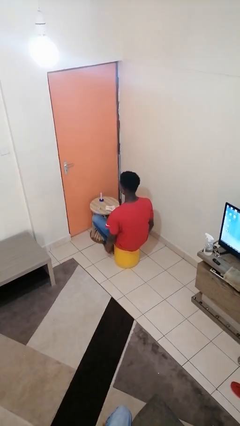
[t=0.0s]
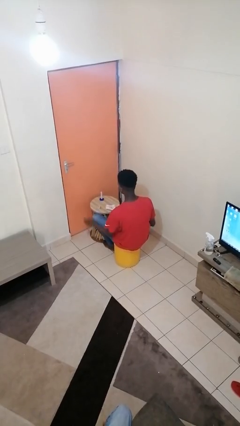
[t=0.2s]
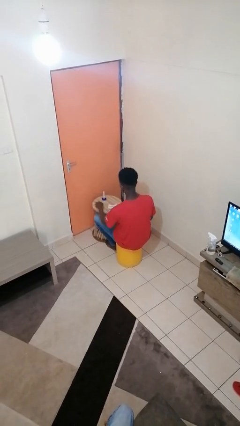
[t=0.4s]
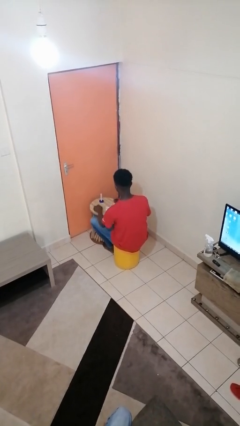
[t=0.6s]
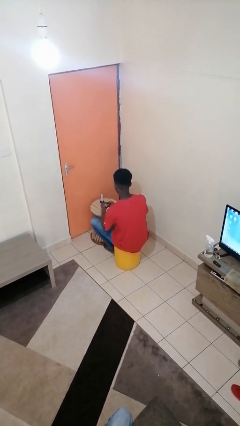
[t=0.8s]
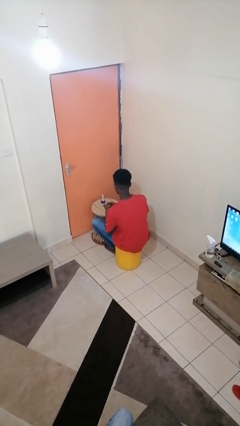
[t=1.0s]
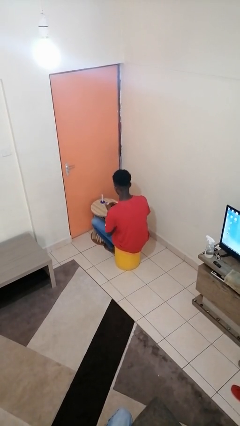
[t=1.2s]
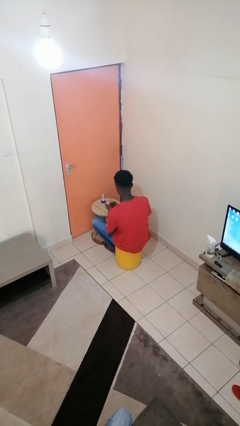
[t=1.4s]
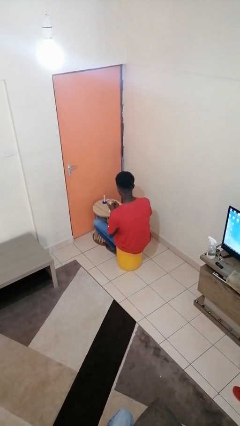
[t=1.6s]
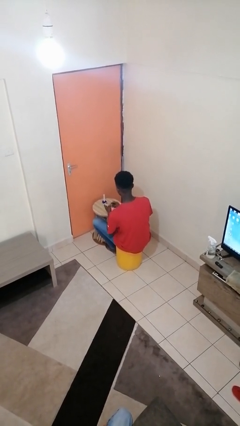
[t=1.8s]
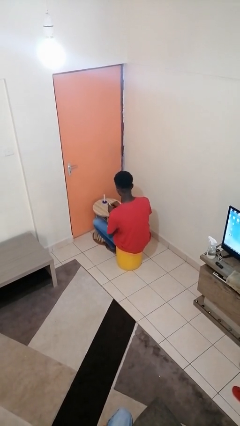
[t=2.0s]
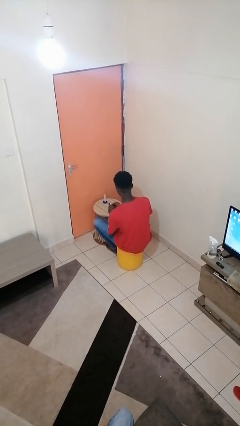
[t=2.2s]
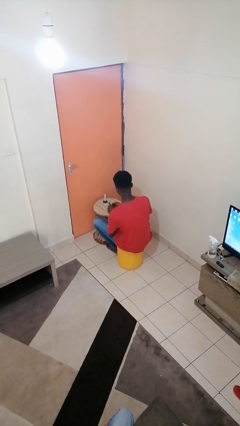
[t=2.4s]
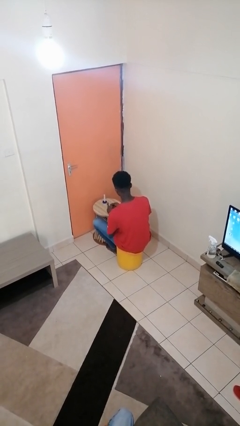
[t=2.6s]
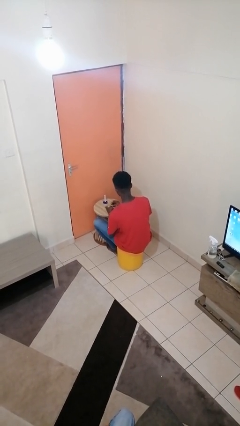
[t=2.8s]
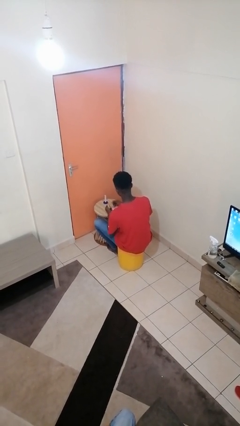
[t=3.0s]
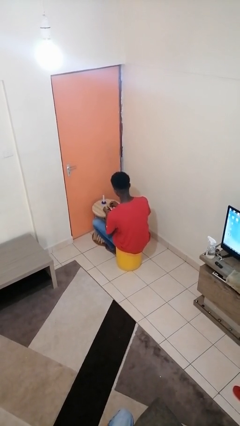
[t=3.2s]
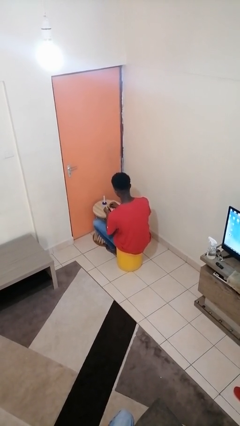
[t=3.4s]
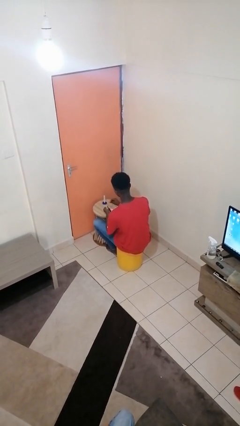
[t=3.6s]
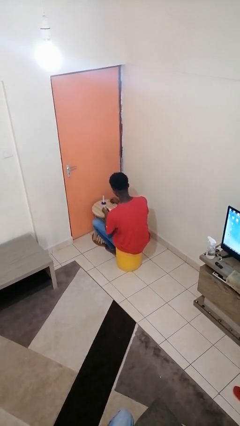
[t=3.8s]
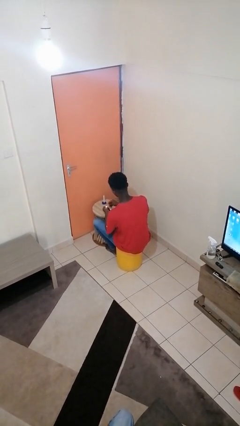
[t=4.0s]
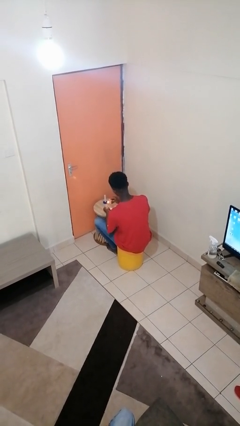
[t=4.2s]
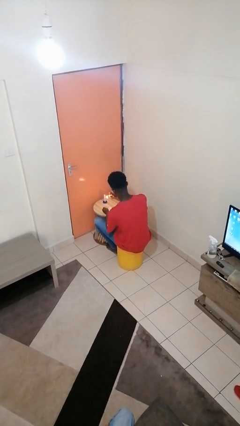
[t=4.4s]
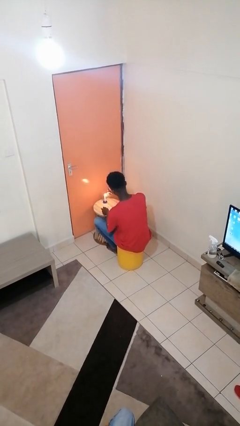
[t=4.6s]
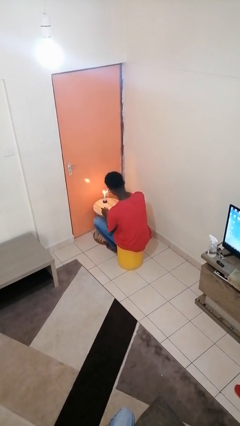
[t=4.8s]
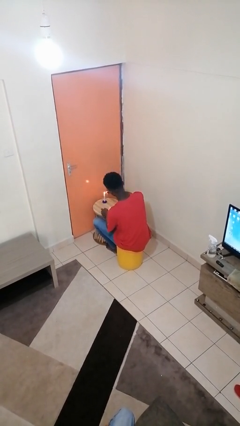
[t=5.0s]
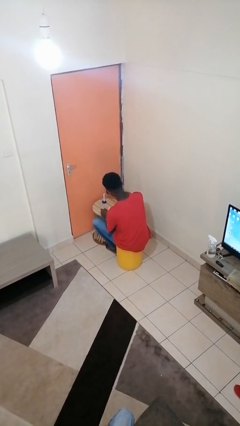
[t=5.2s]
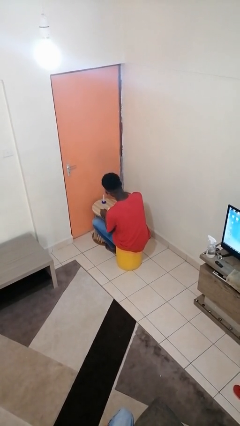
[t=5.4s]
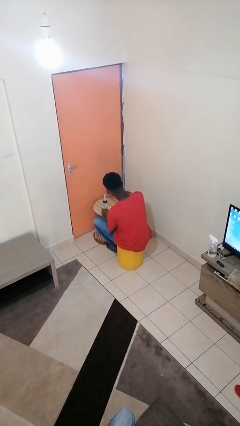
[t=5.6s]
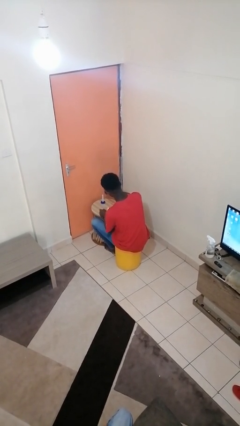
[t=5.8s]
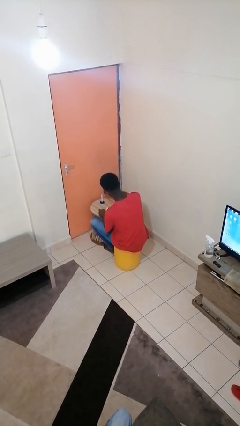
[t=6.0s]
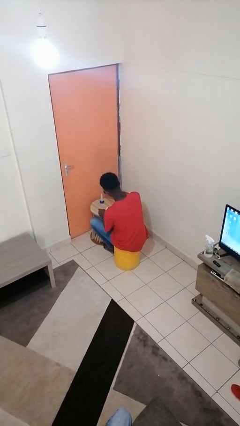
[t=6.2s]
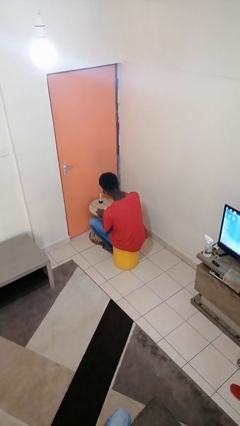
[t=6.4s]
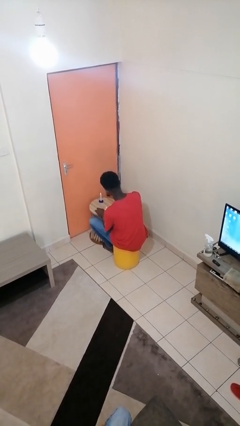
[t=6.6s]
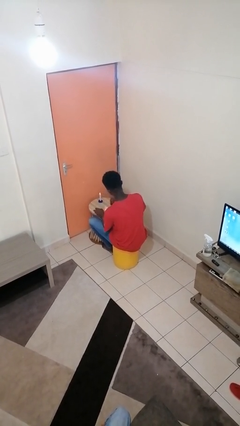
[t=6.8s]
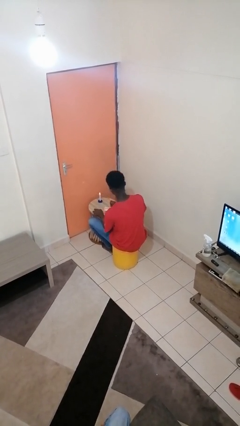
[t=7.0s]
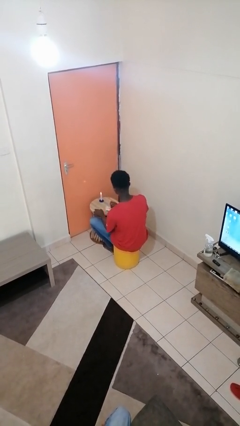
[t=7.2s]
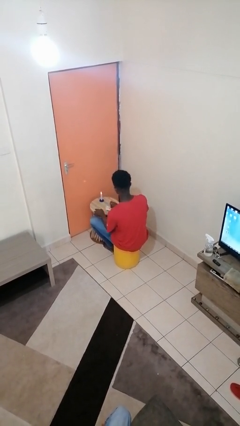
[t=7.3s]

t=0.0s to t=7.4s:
person lights candle

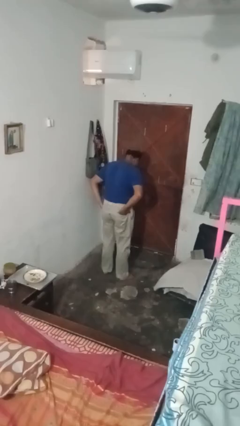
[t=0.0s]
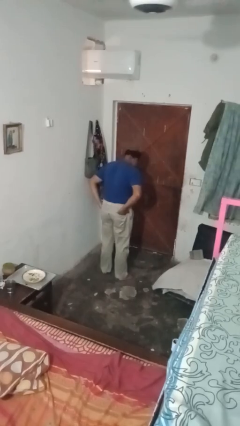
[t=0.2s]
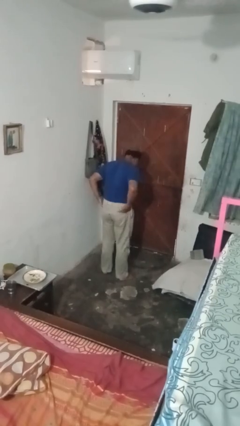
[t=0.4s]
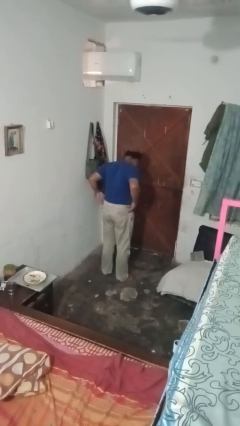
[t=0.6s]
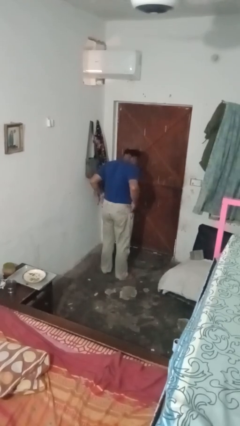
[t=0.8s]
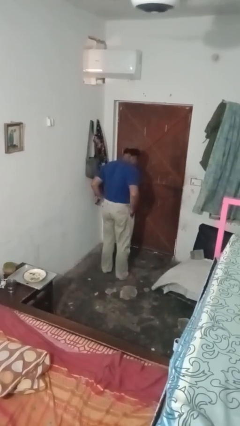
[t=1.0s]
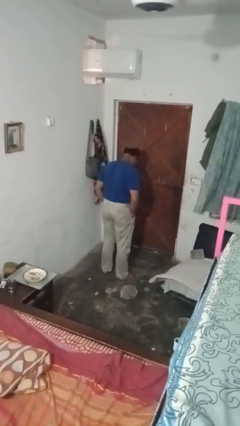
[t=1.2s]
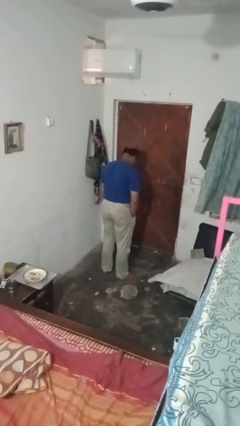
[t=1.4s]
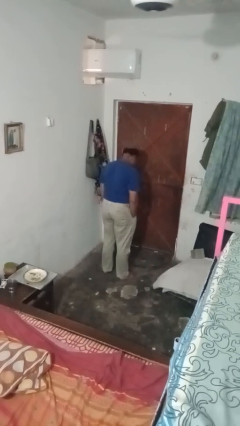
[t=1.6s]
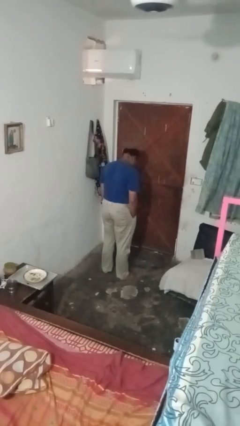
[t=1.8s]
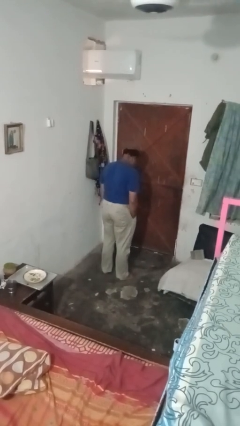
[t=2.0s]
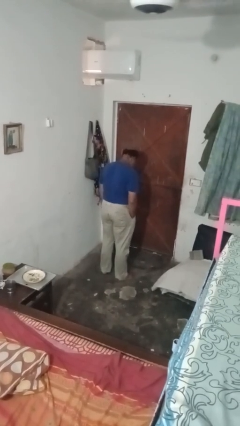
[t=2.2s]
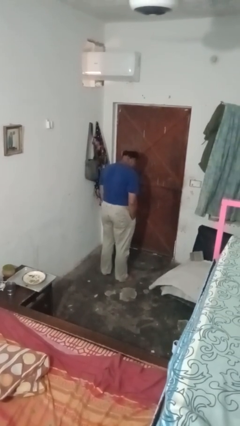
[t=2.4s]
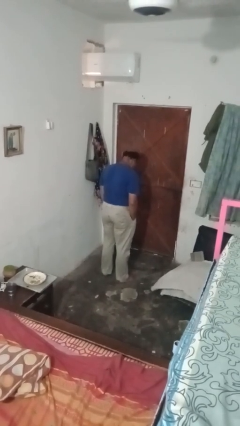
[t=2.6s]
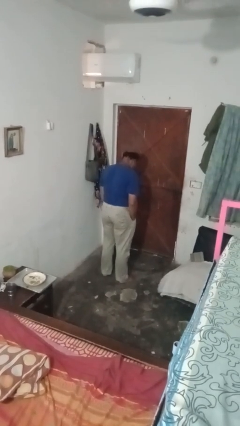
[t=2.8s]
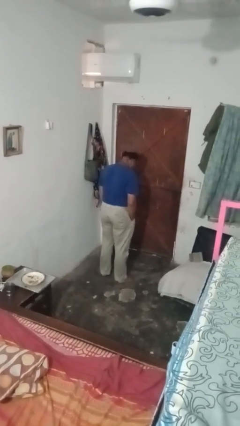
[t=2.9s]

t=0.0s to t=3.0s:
person puts hands in back pockets

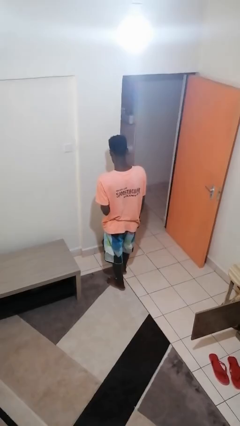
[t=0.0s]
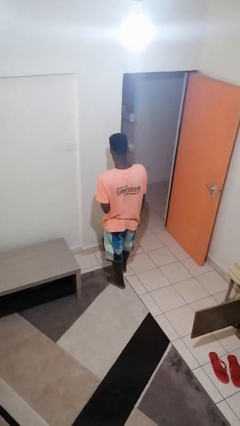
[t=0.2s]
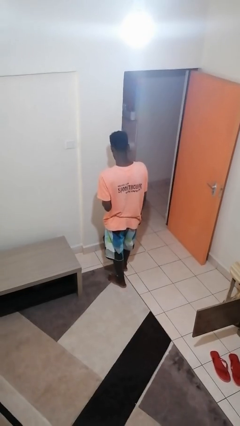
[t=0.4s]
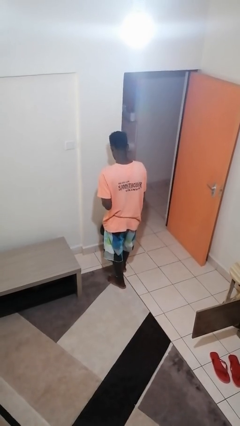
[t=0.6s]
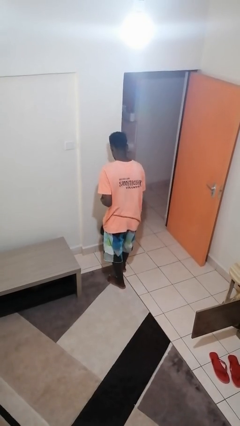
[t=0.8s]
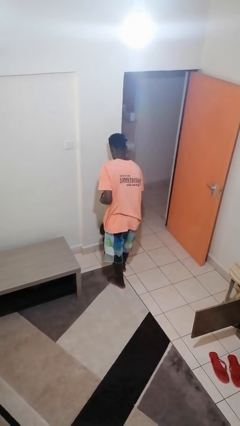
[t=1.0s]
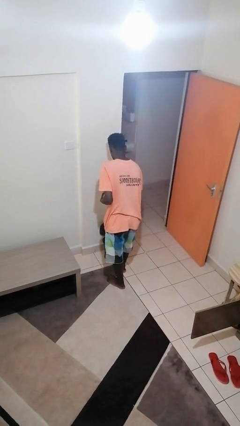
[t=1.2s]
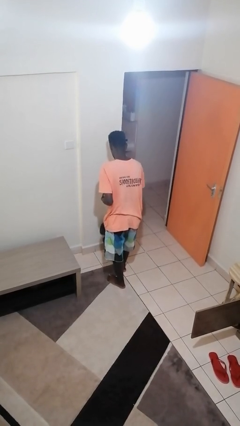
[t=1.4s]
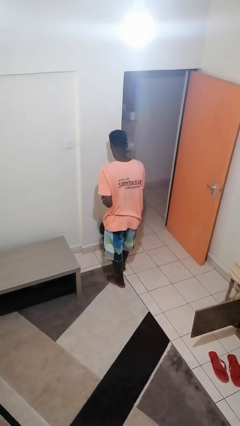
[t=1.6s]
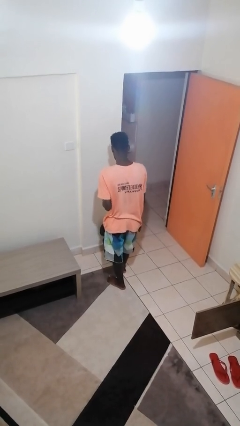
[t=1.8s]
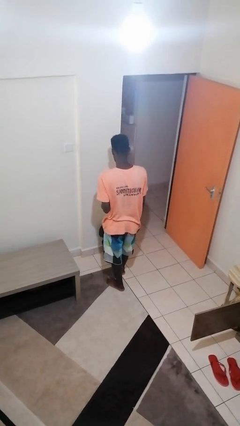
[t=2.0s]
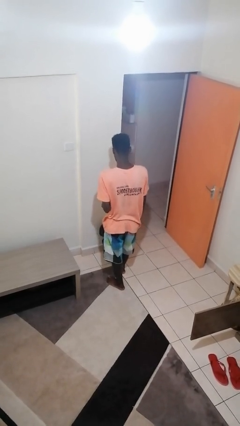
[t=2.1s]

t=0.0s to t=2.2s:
person discards trash

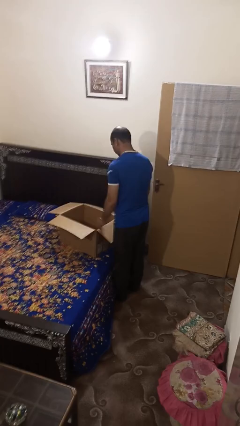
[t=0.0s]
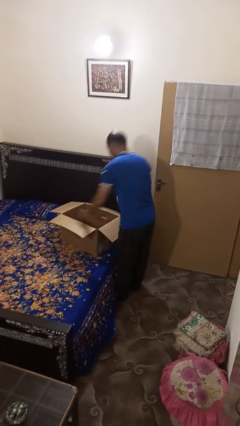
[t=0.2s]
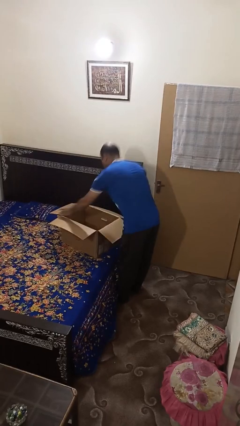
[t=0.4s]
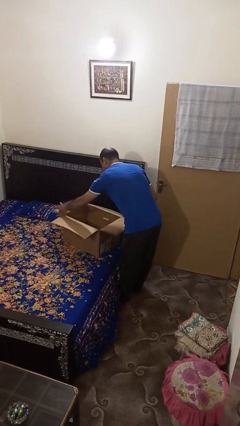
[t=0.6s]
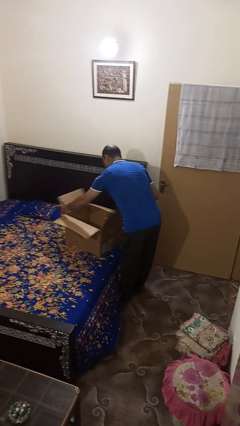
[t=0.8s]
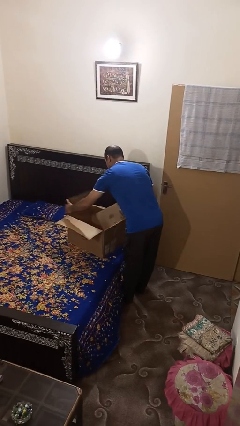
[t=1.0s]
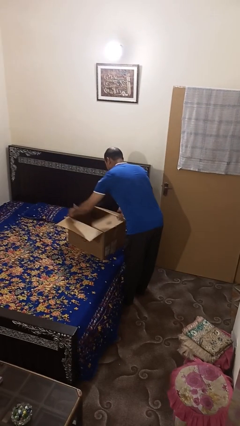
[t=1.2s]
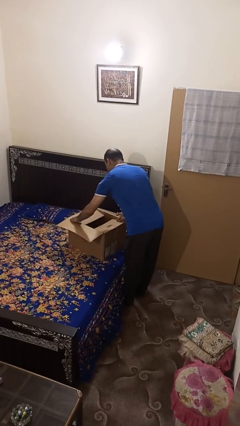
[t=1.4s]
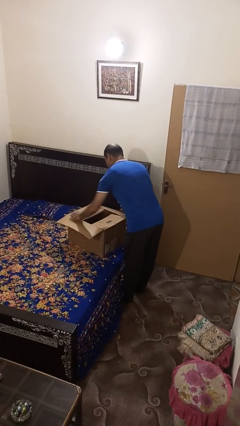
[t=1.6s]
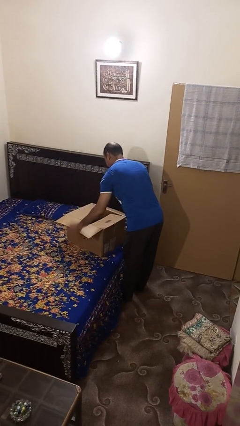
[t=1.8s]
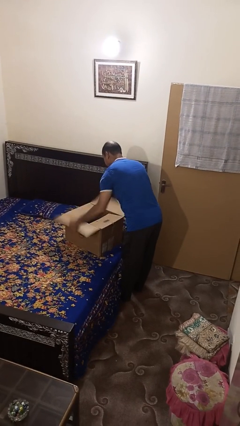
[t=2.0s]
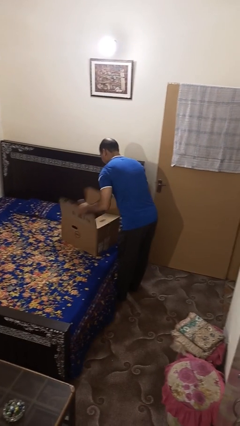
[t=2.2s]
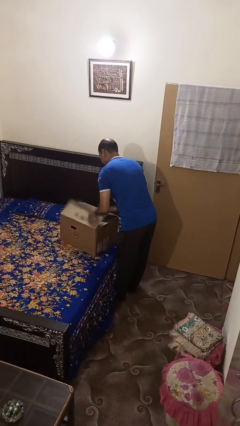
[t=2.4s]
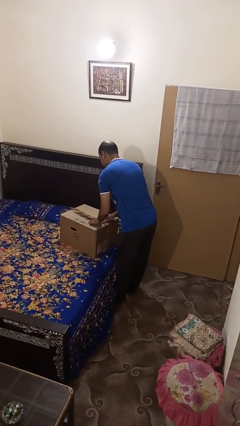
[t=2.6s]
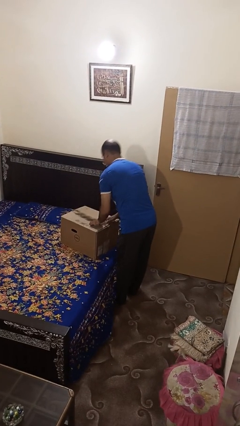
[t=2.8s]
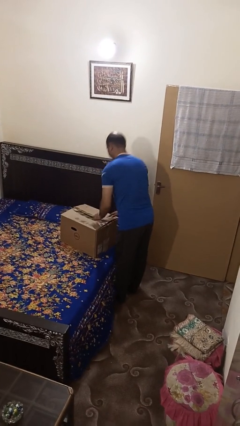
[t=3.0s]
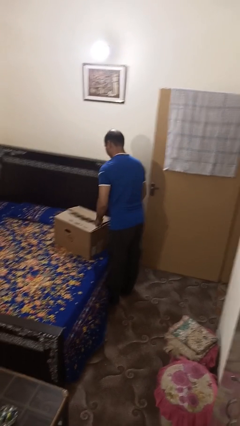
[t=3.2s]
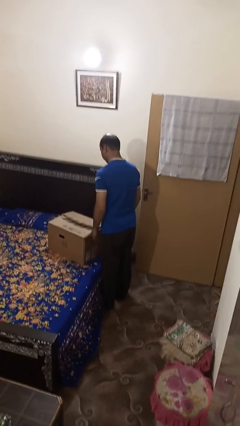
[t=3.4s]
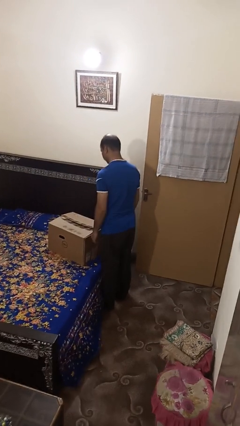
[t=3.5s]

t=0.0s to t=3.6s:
person closes box

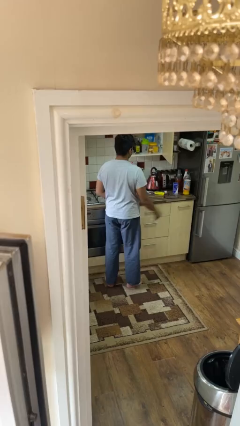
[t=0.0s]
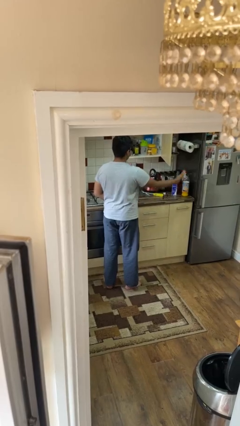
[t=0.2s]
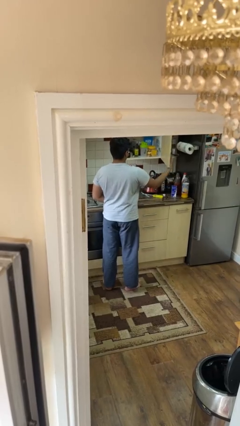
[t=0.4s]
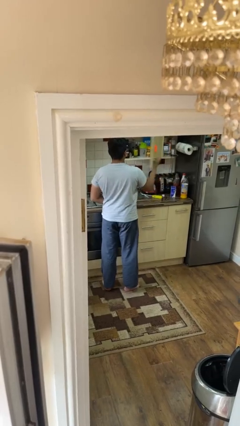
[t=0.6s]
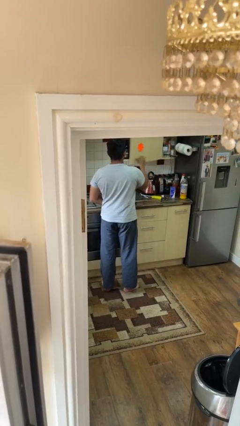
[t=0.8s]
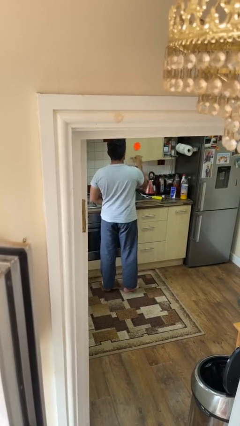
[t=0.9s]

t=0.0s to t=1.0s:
person closes cabinet

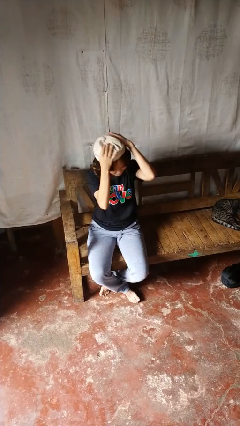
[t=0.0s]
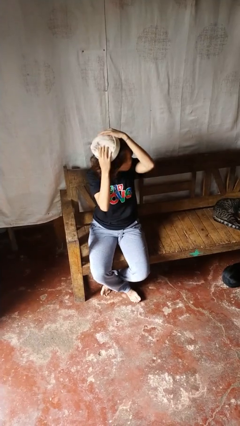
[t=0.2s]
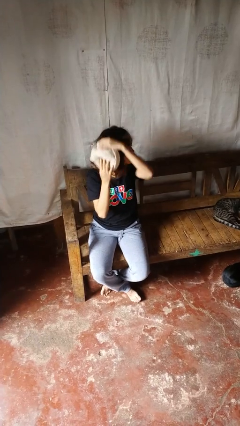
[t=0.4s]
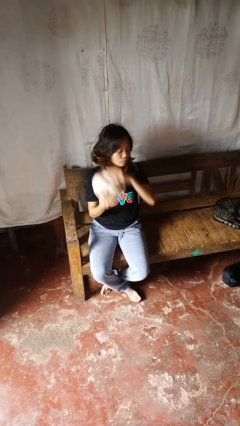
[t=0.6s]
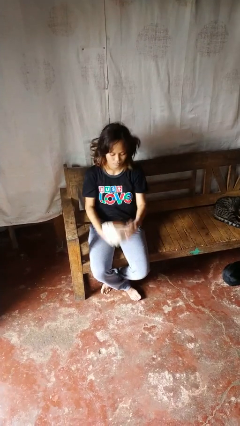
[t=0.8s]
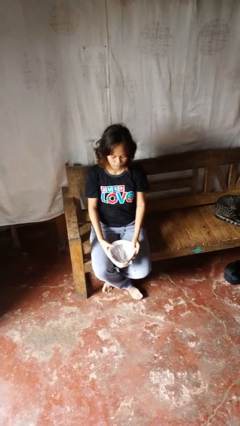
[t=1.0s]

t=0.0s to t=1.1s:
person takes off hat
